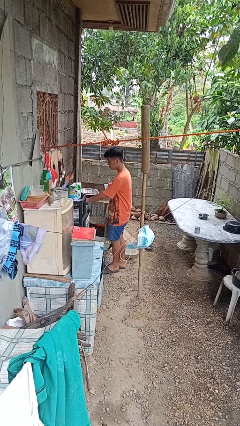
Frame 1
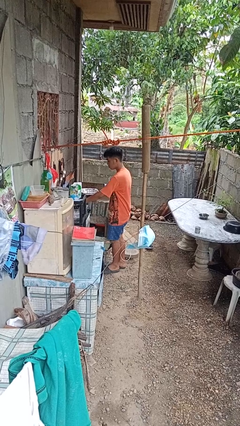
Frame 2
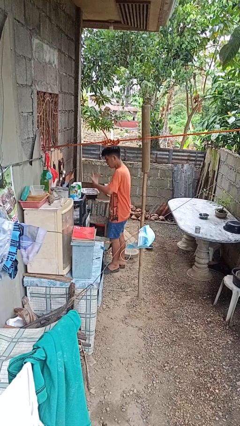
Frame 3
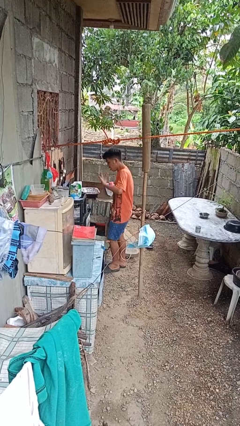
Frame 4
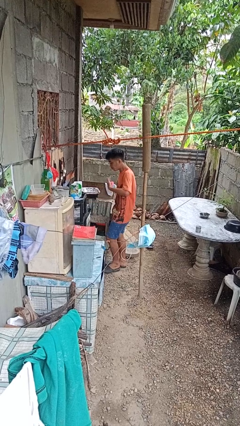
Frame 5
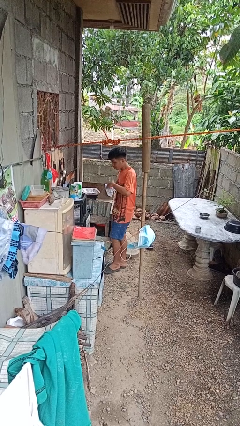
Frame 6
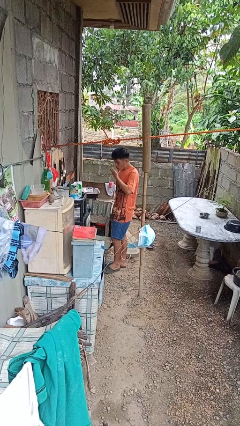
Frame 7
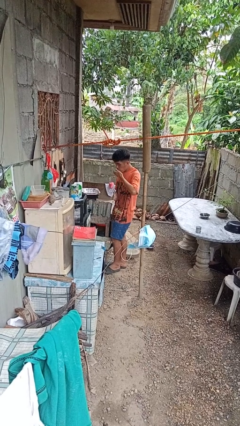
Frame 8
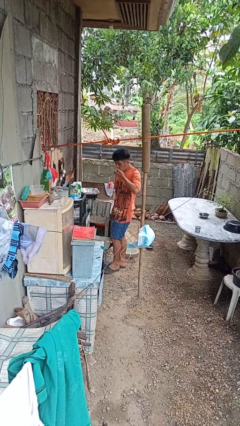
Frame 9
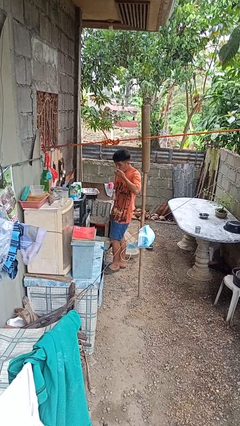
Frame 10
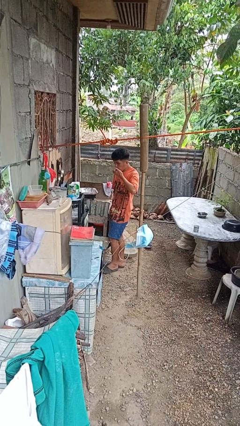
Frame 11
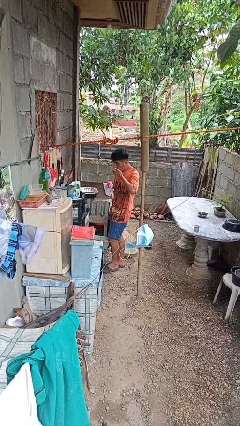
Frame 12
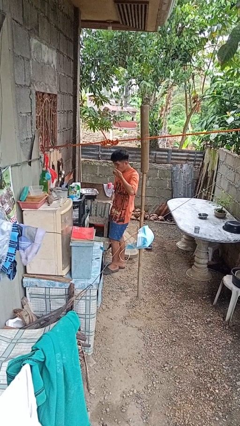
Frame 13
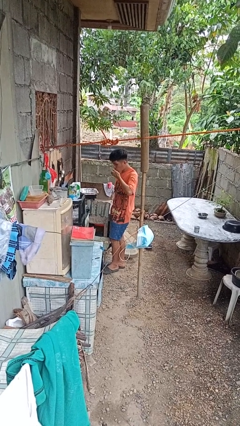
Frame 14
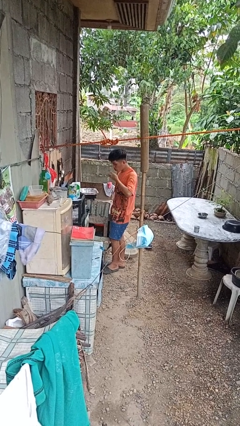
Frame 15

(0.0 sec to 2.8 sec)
person burns hand

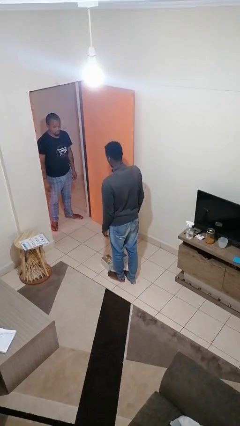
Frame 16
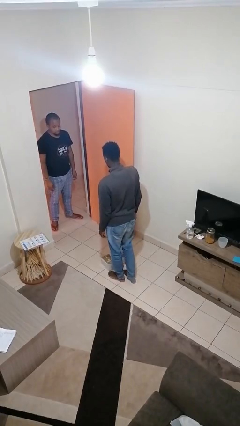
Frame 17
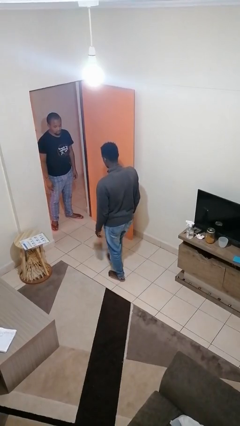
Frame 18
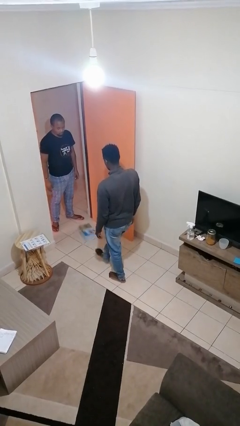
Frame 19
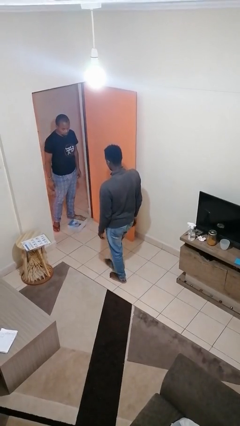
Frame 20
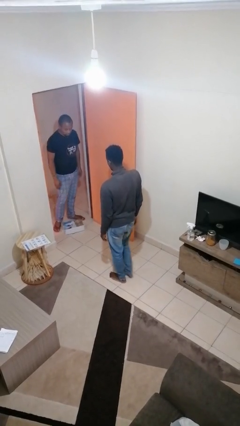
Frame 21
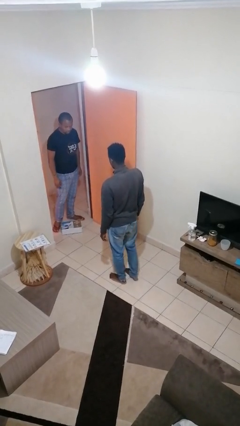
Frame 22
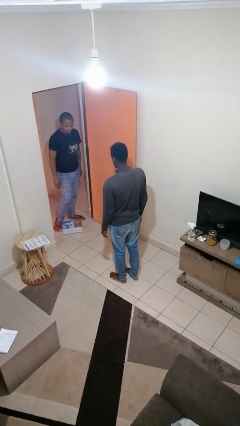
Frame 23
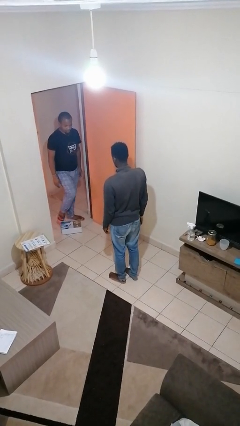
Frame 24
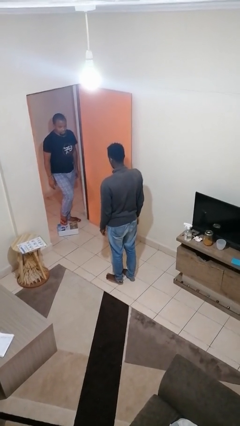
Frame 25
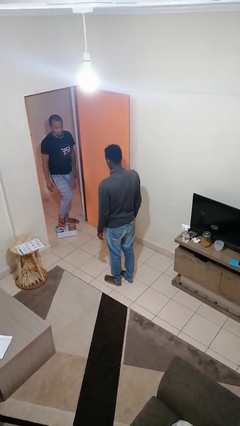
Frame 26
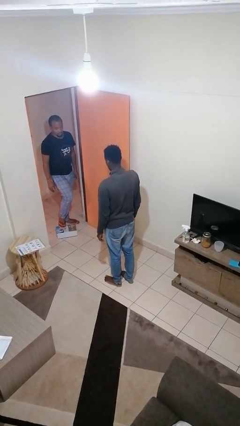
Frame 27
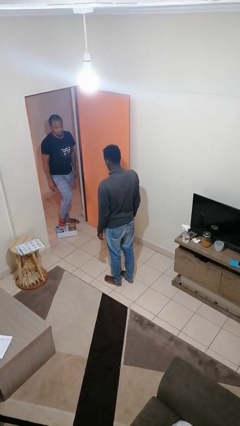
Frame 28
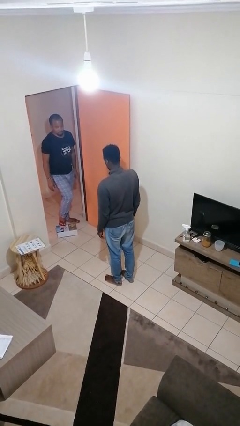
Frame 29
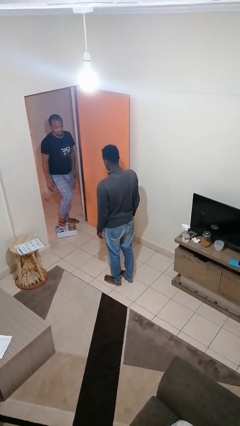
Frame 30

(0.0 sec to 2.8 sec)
person kicks object to person

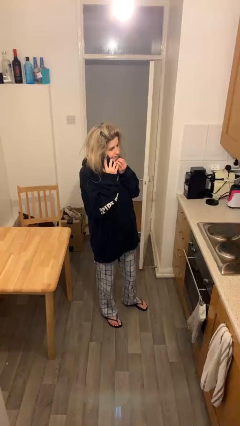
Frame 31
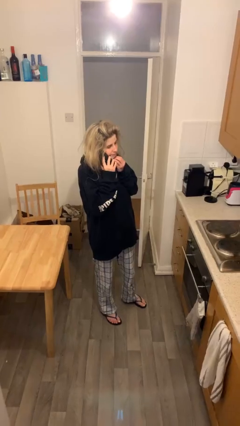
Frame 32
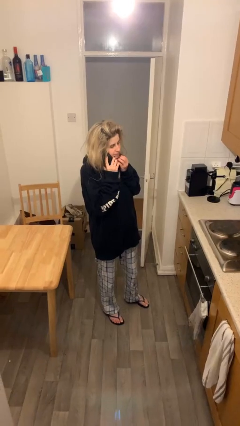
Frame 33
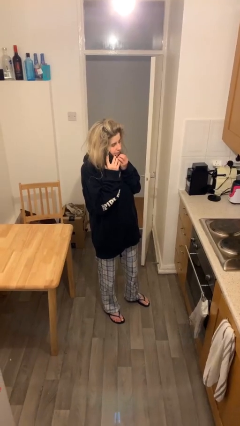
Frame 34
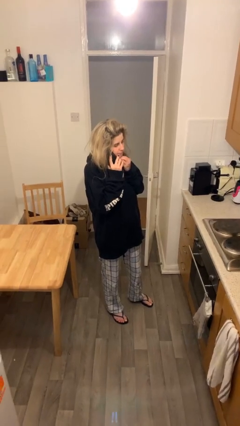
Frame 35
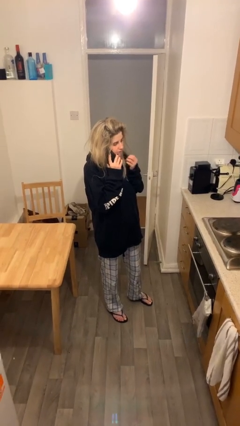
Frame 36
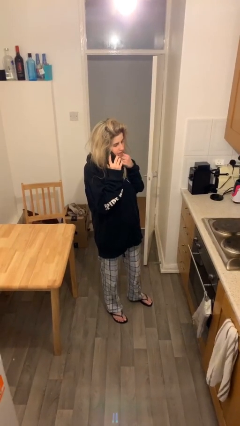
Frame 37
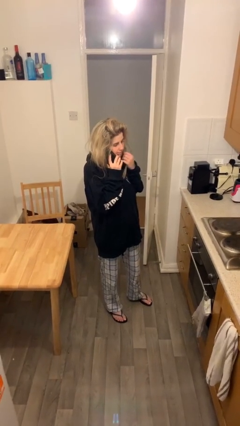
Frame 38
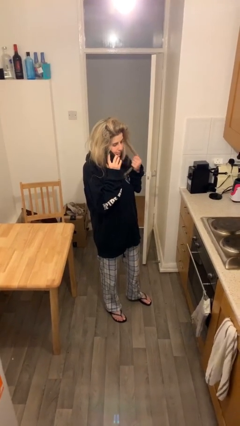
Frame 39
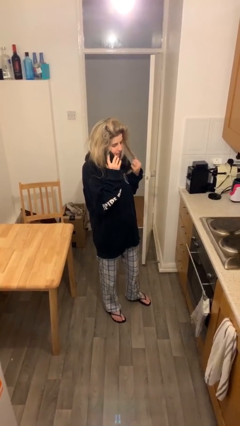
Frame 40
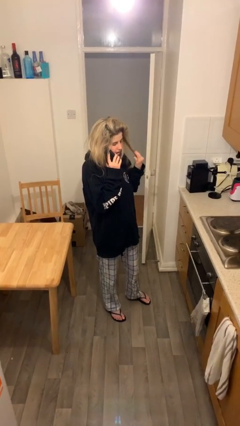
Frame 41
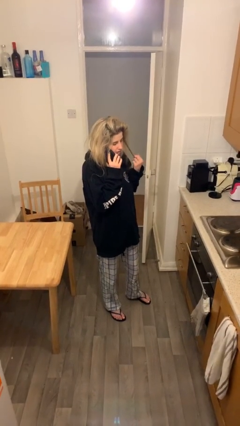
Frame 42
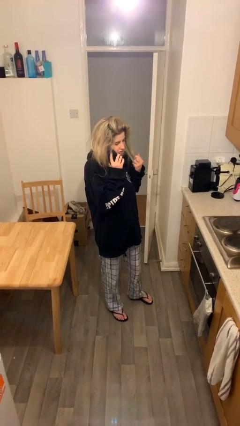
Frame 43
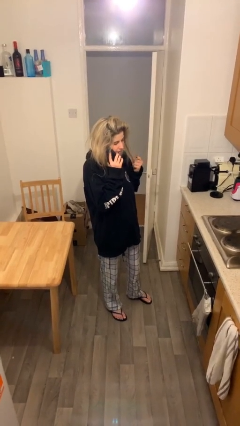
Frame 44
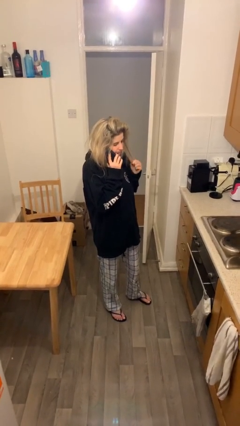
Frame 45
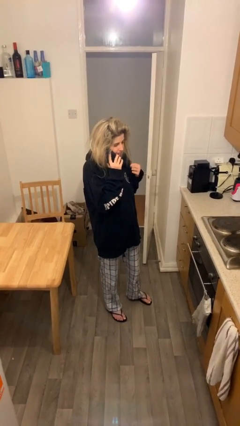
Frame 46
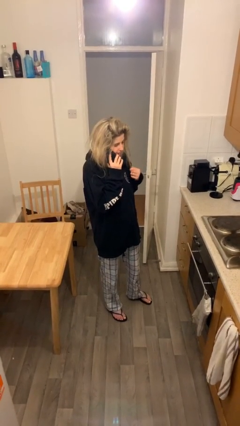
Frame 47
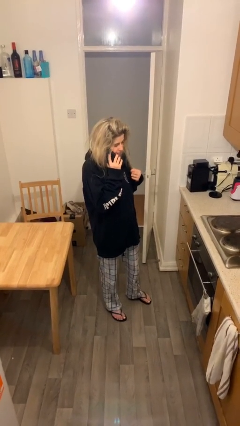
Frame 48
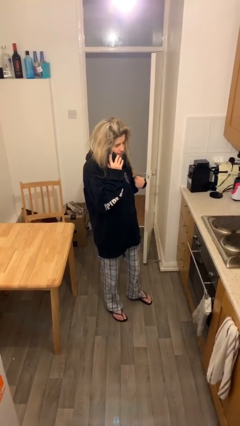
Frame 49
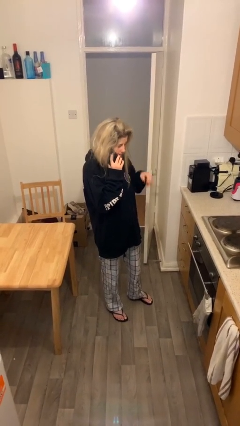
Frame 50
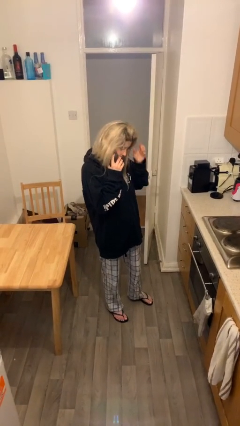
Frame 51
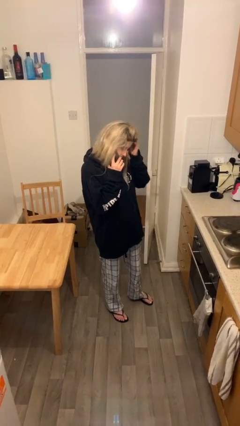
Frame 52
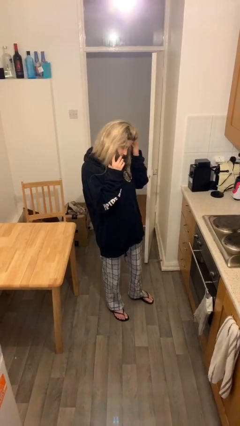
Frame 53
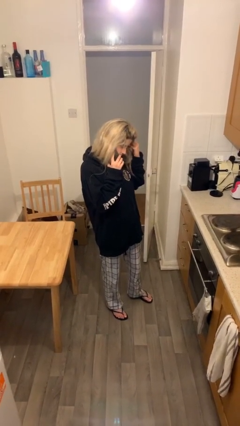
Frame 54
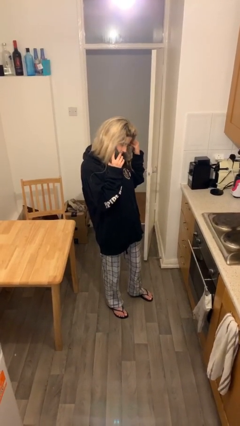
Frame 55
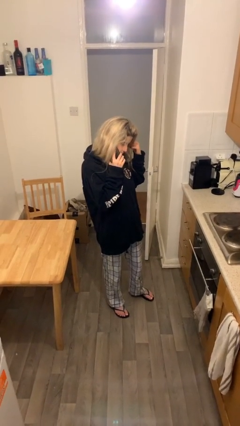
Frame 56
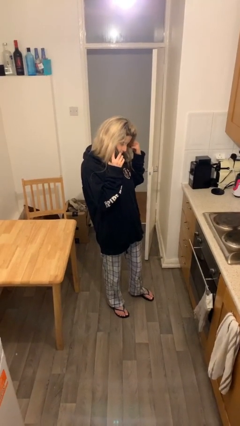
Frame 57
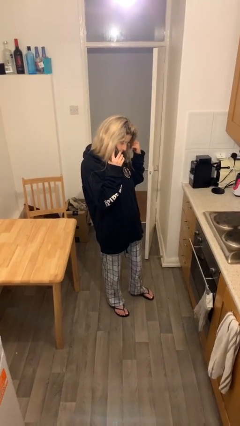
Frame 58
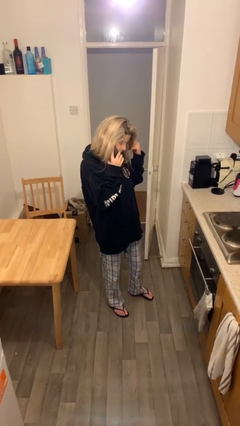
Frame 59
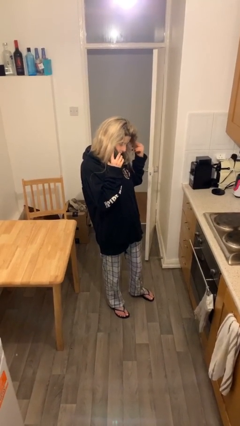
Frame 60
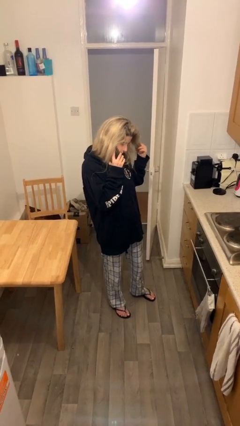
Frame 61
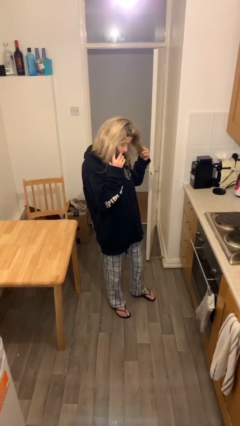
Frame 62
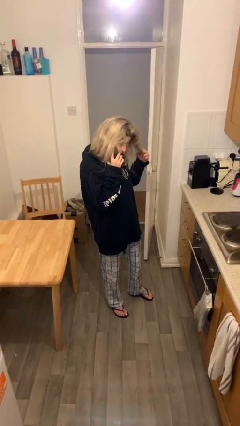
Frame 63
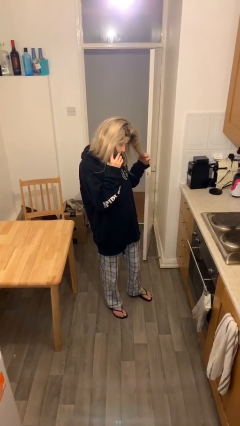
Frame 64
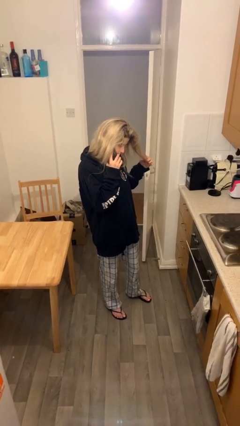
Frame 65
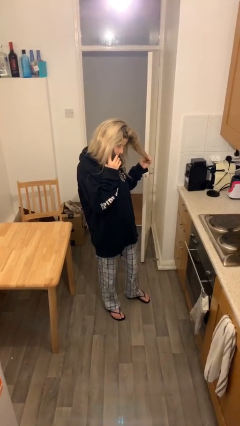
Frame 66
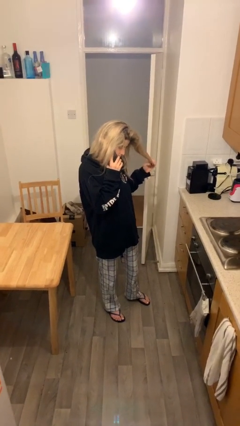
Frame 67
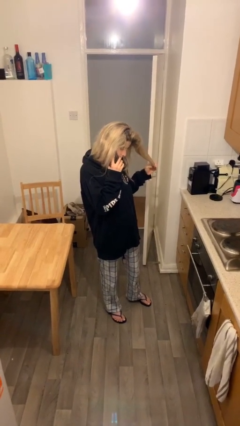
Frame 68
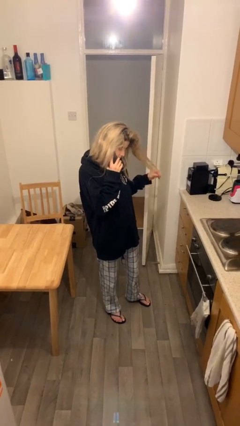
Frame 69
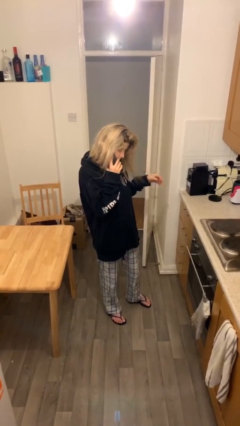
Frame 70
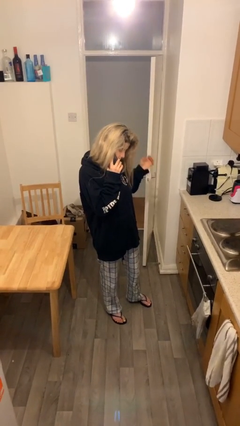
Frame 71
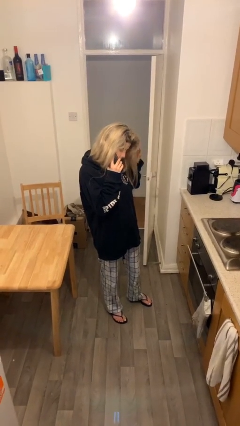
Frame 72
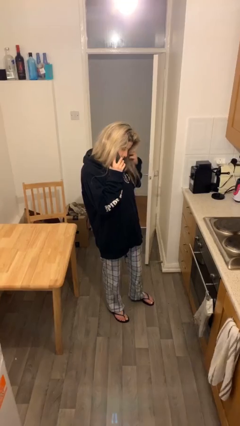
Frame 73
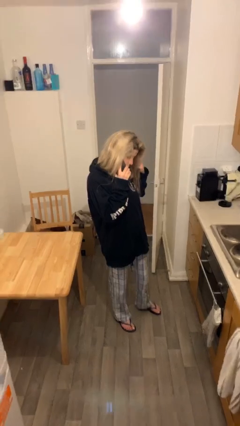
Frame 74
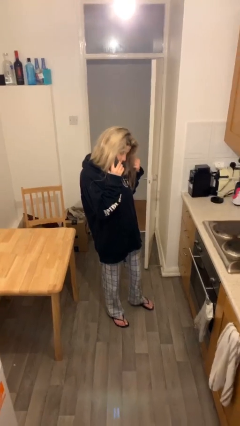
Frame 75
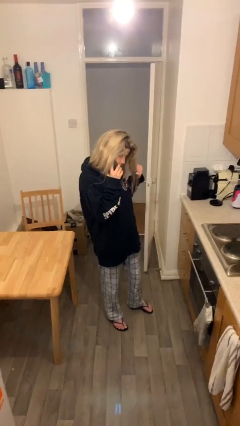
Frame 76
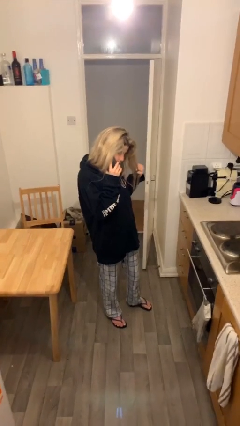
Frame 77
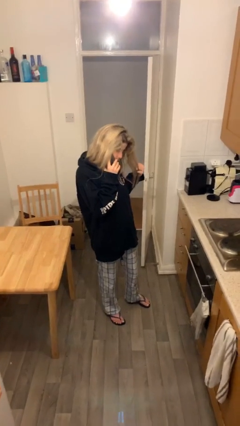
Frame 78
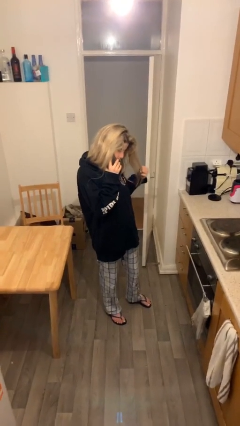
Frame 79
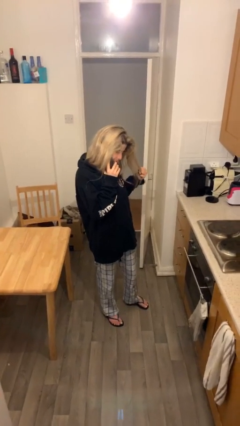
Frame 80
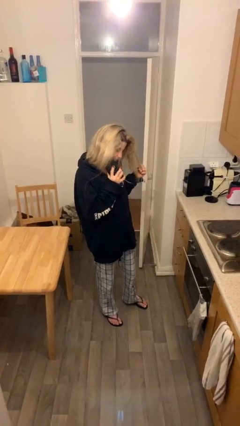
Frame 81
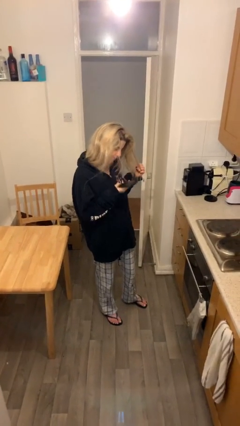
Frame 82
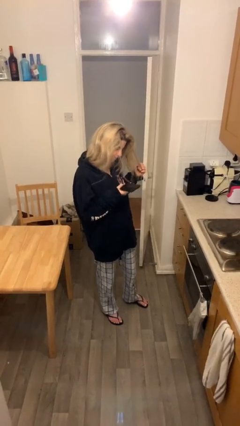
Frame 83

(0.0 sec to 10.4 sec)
person talks on phone

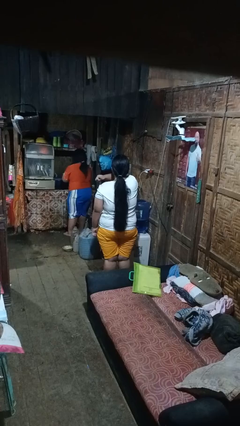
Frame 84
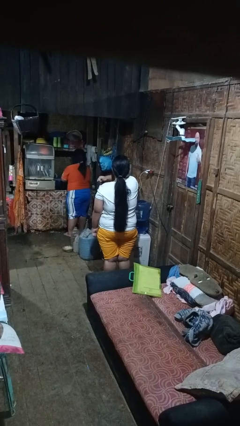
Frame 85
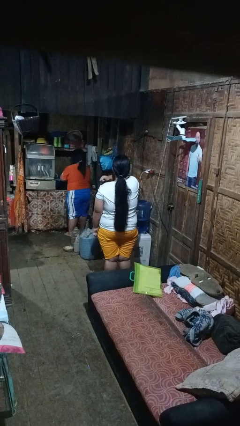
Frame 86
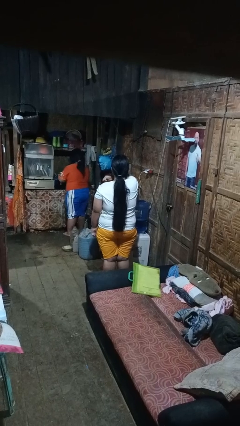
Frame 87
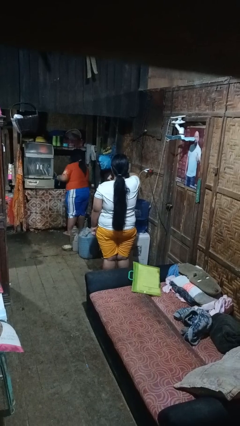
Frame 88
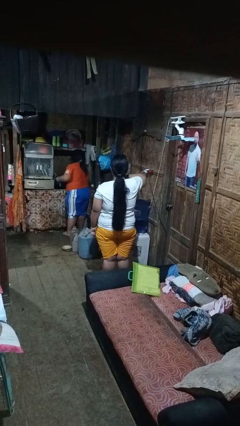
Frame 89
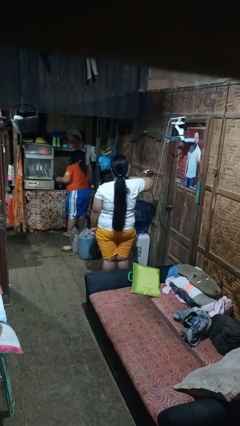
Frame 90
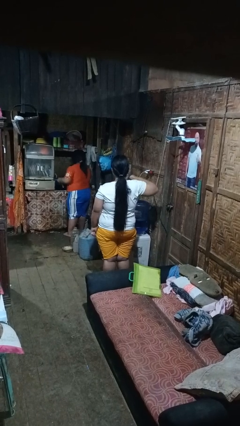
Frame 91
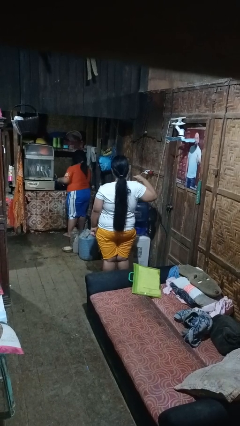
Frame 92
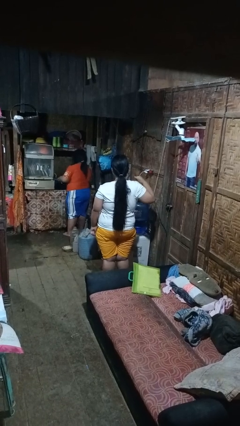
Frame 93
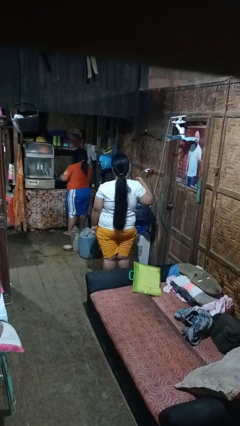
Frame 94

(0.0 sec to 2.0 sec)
person gestures cut
